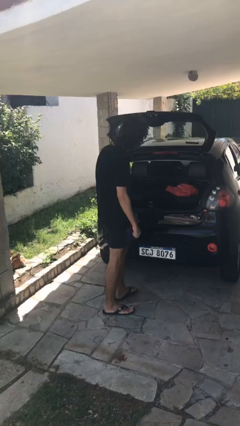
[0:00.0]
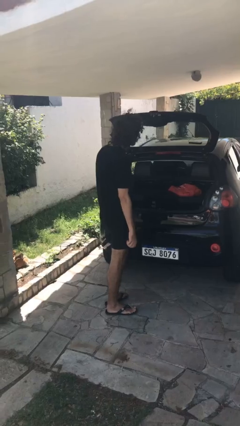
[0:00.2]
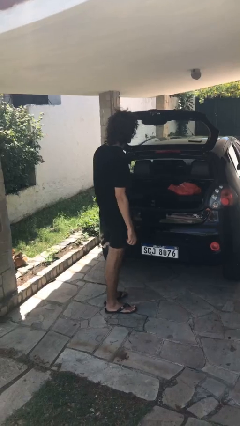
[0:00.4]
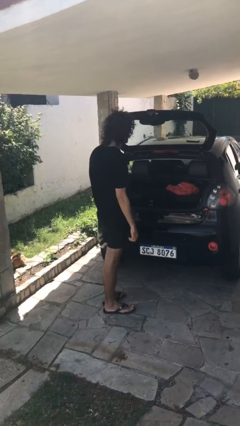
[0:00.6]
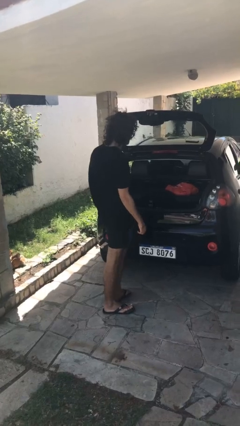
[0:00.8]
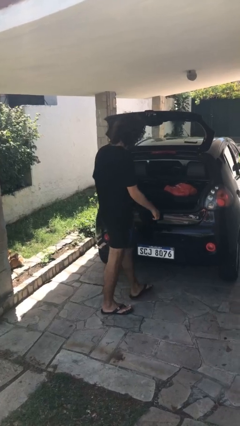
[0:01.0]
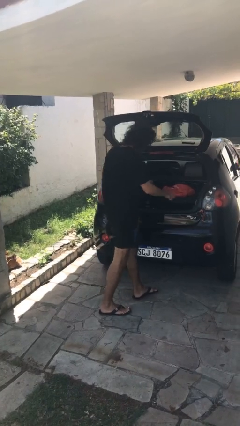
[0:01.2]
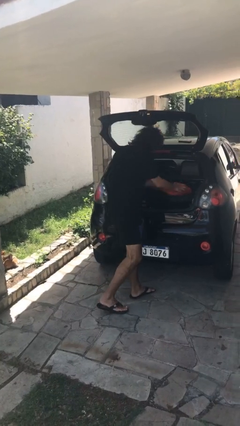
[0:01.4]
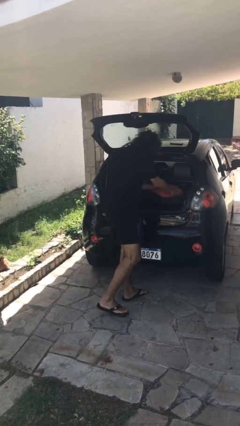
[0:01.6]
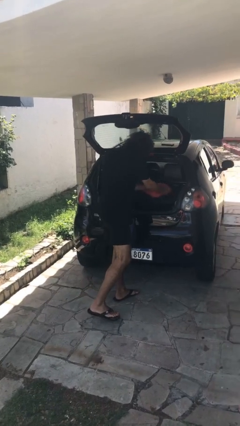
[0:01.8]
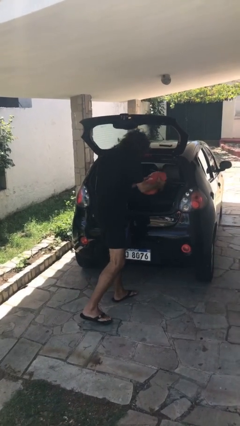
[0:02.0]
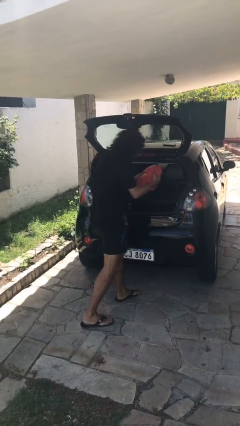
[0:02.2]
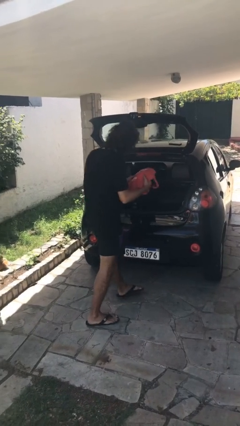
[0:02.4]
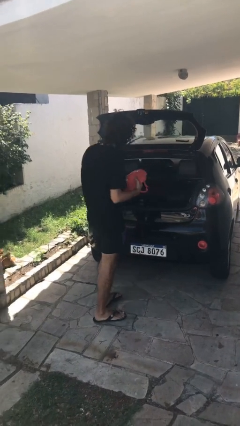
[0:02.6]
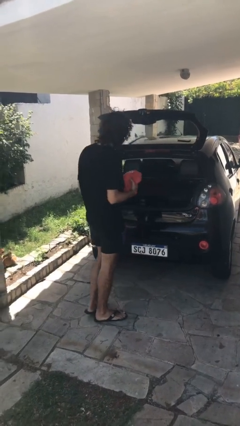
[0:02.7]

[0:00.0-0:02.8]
person unloads car

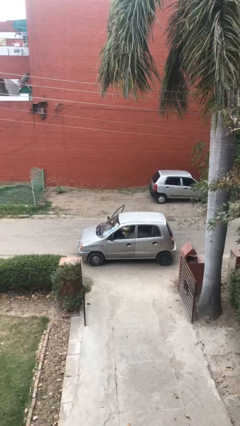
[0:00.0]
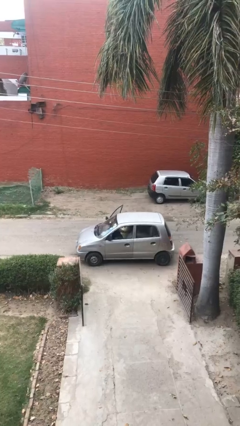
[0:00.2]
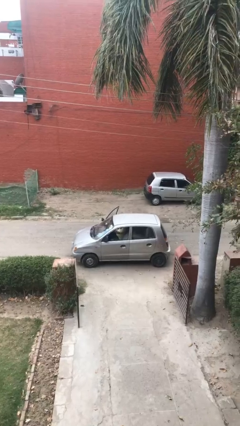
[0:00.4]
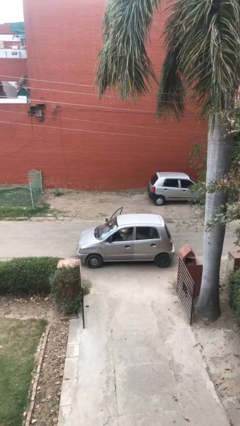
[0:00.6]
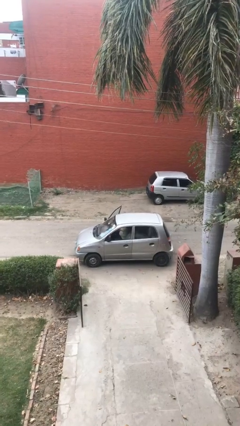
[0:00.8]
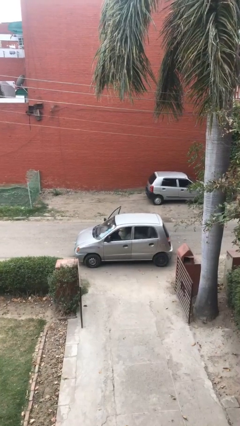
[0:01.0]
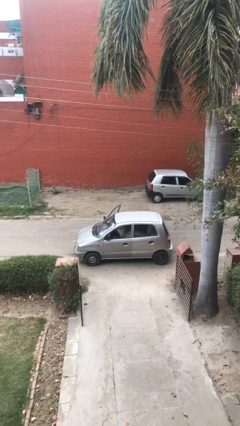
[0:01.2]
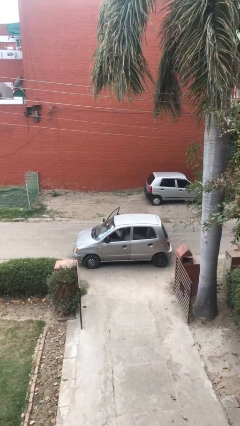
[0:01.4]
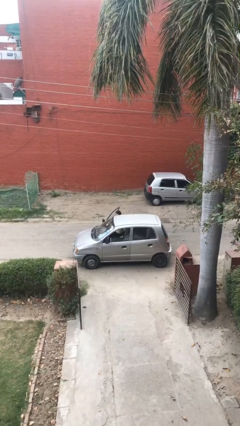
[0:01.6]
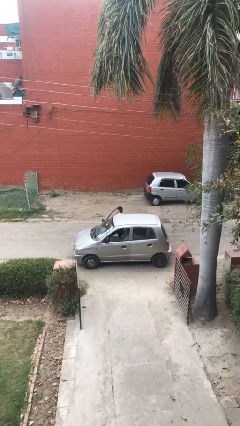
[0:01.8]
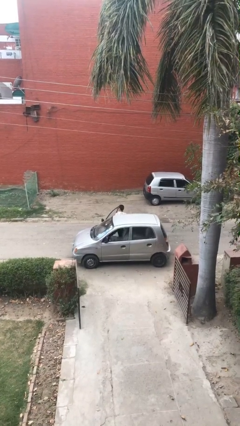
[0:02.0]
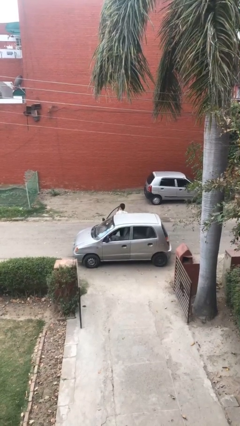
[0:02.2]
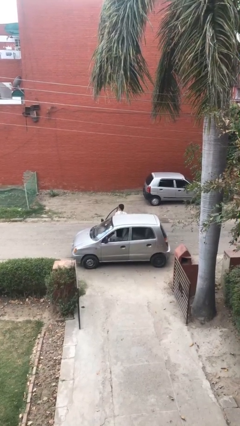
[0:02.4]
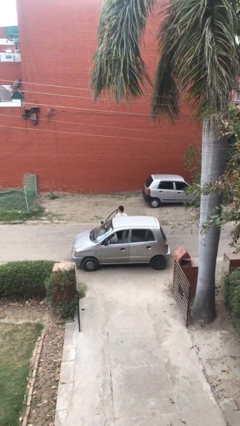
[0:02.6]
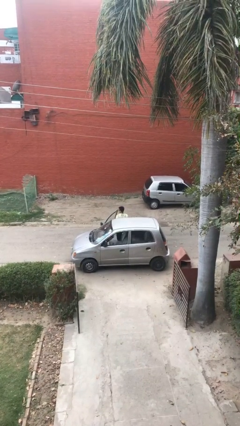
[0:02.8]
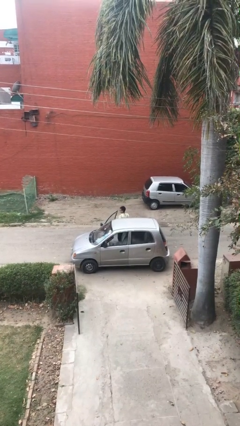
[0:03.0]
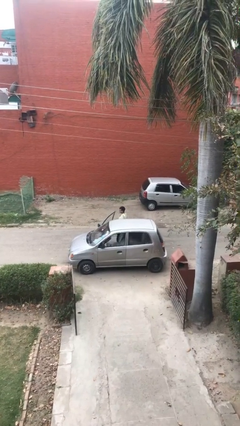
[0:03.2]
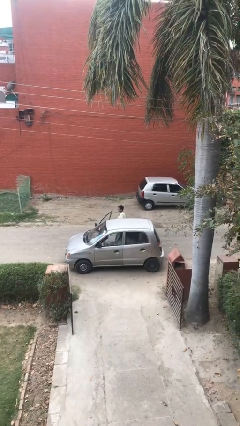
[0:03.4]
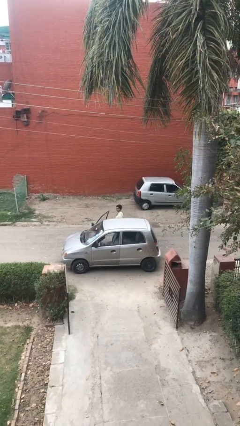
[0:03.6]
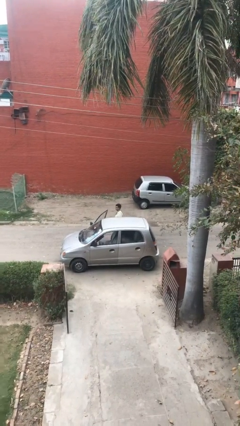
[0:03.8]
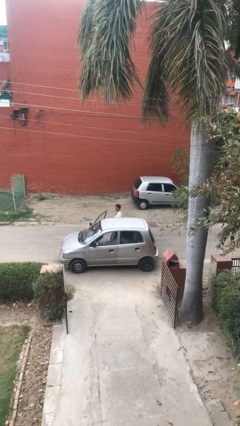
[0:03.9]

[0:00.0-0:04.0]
person exits car

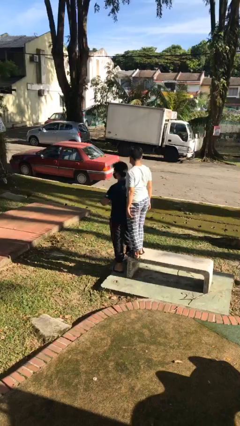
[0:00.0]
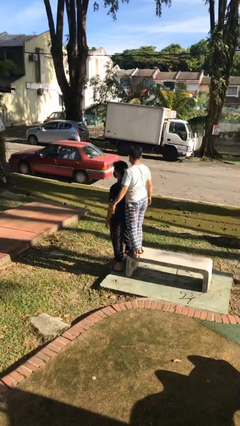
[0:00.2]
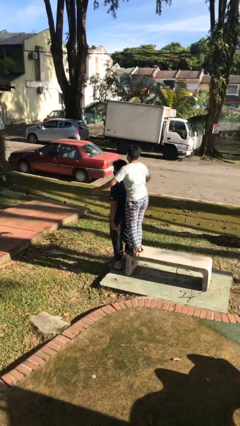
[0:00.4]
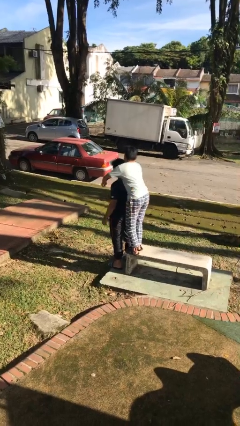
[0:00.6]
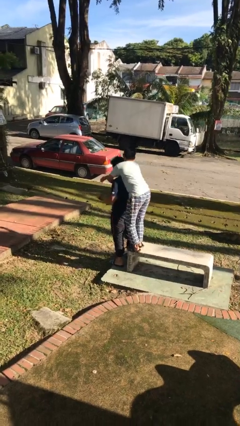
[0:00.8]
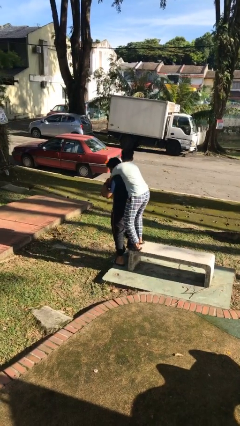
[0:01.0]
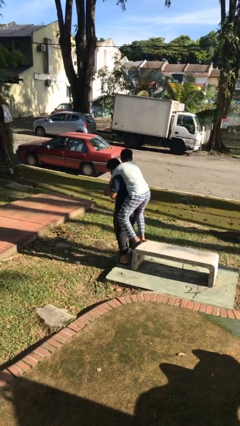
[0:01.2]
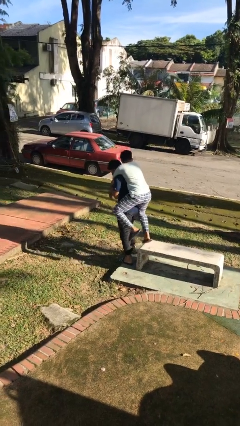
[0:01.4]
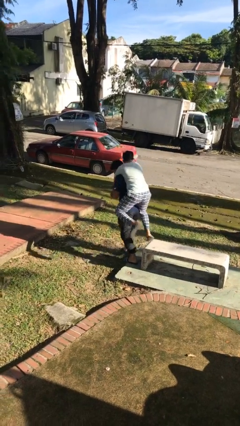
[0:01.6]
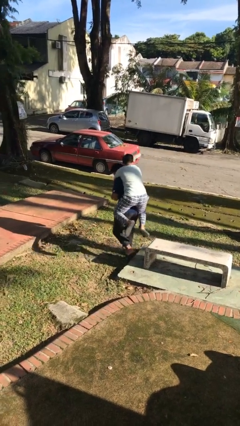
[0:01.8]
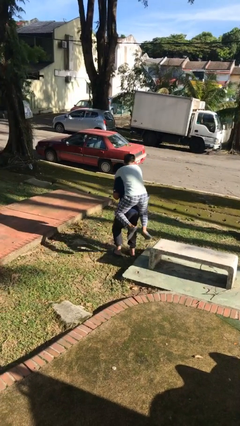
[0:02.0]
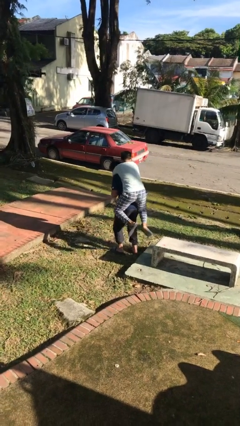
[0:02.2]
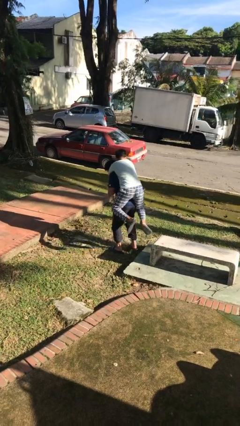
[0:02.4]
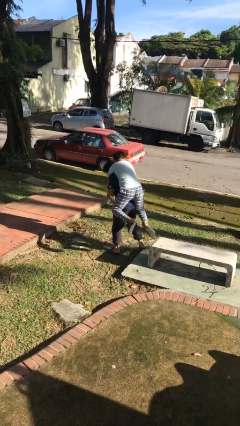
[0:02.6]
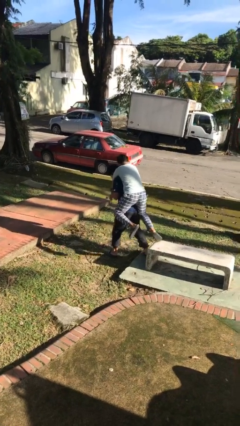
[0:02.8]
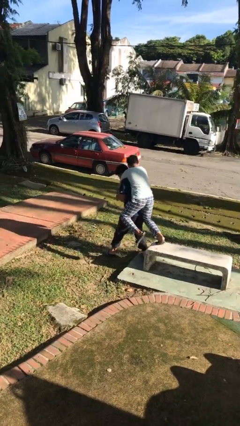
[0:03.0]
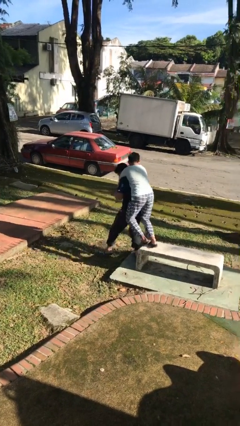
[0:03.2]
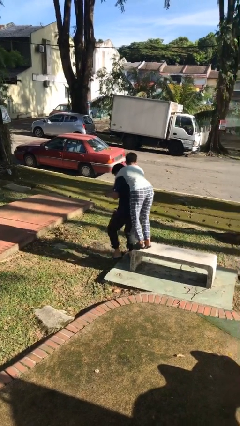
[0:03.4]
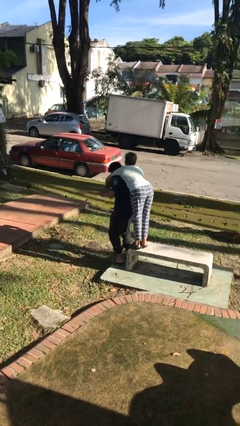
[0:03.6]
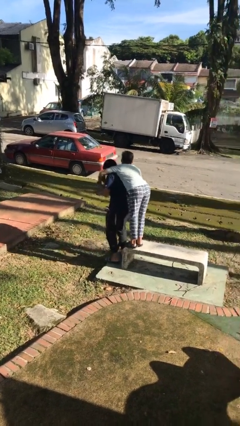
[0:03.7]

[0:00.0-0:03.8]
person carries person on back

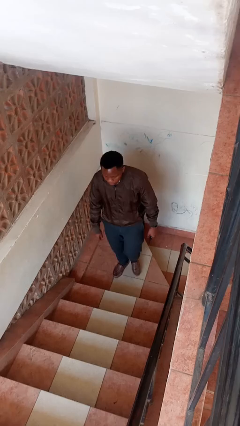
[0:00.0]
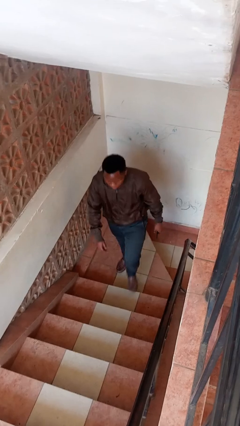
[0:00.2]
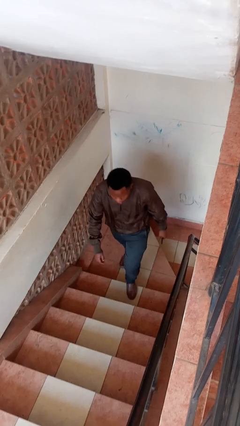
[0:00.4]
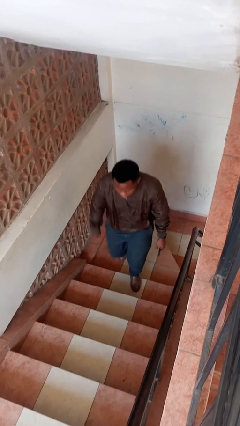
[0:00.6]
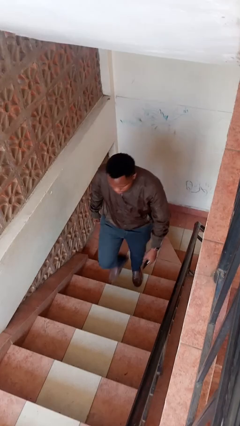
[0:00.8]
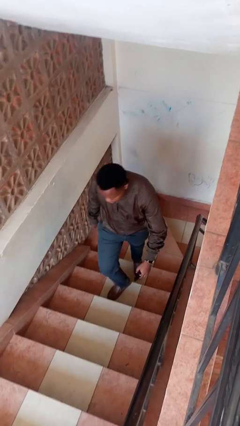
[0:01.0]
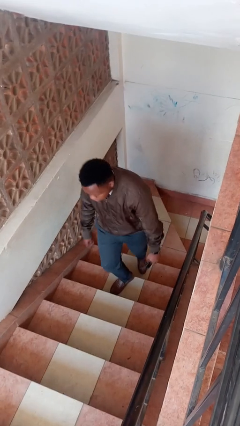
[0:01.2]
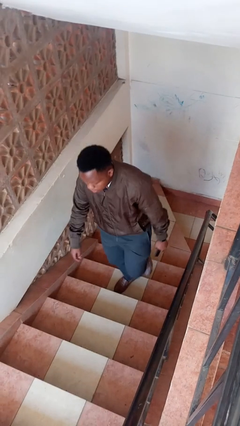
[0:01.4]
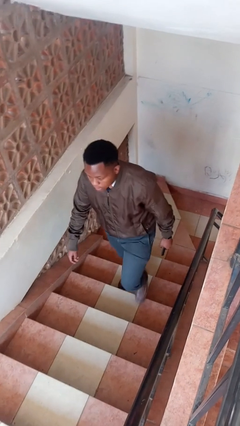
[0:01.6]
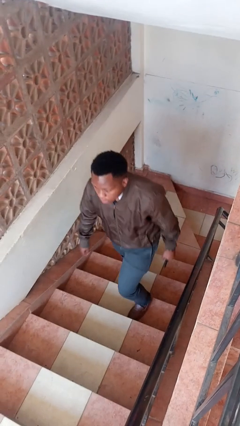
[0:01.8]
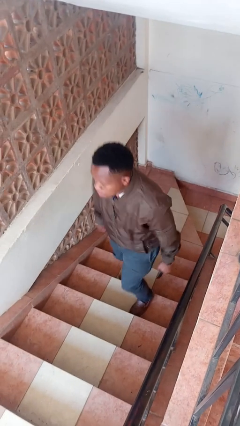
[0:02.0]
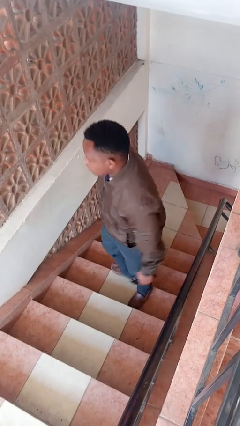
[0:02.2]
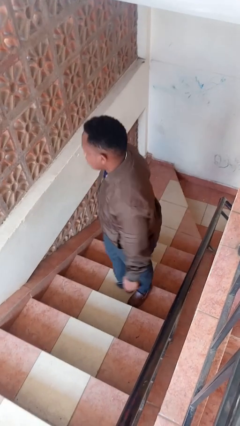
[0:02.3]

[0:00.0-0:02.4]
person climbs up stairs

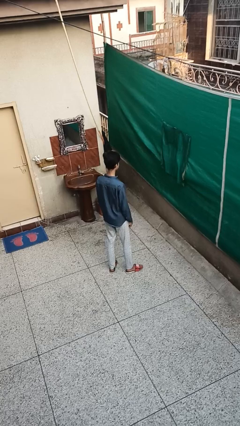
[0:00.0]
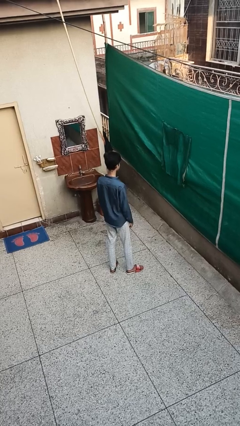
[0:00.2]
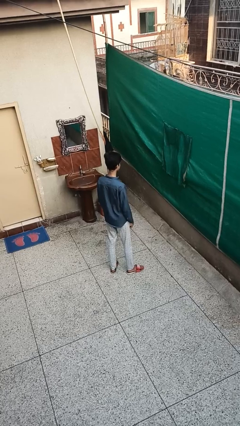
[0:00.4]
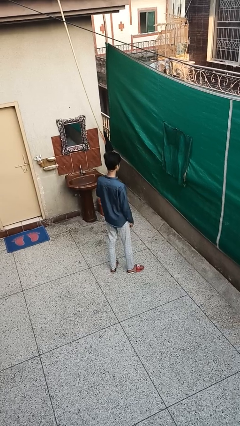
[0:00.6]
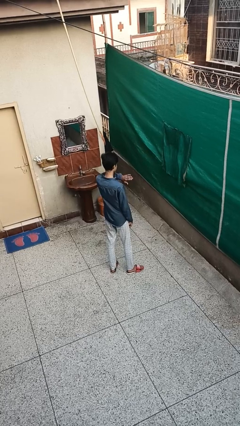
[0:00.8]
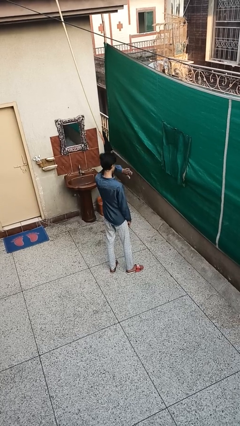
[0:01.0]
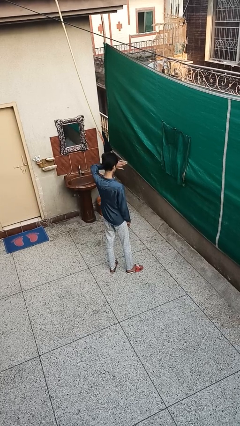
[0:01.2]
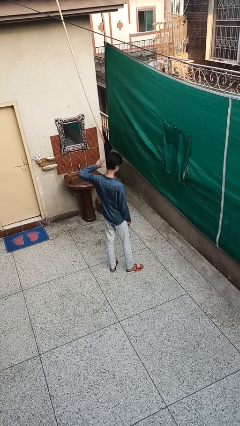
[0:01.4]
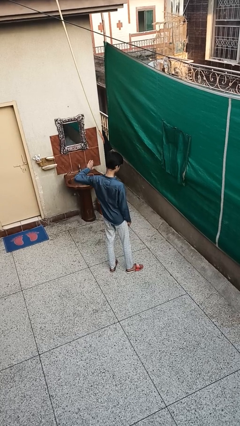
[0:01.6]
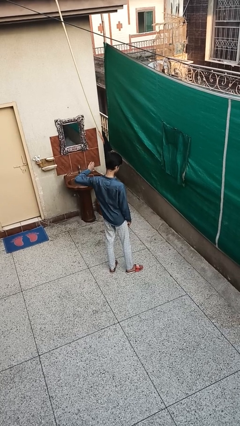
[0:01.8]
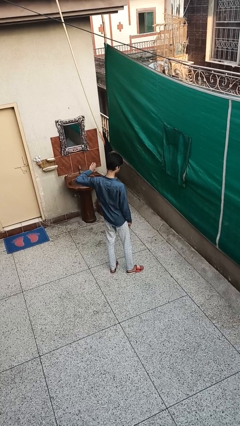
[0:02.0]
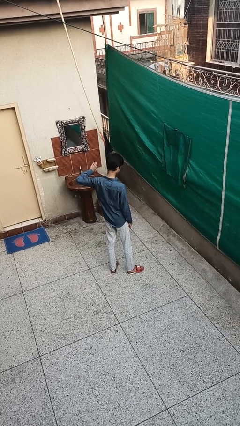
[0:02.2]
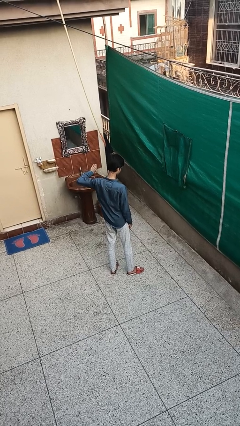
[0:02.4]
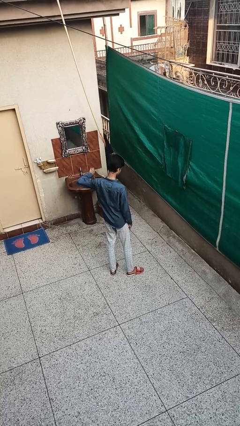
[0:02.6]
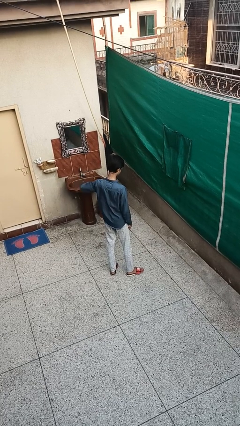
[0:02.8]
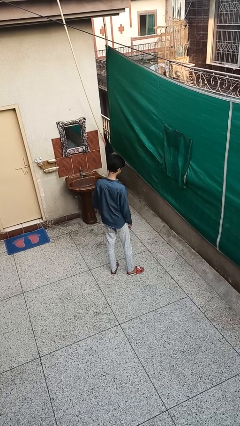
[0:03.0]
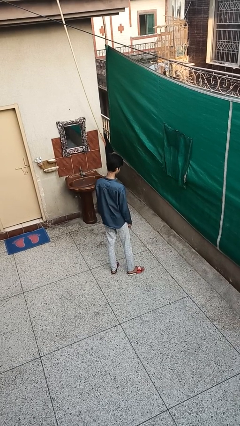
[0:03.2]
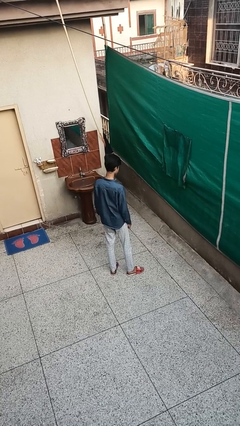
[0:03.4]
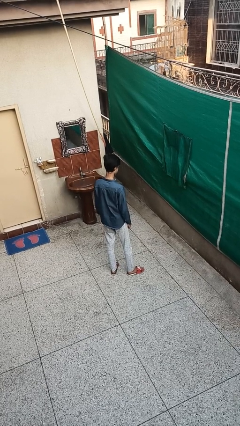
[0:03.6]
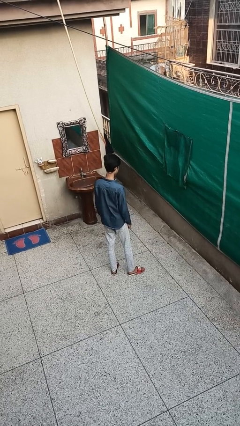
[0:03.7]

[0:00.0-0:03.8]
person gestures swipe left

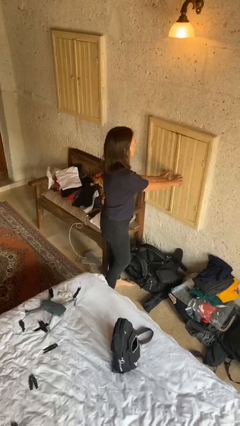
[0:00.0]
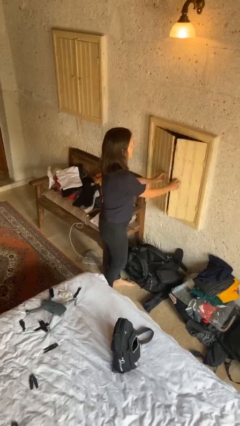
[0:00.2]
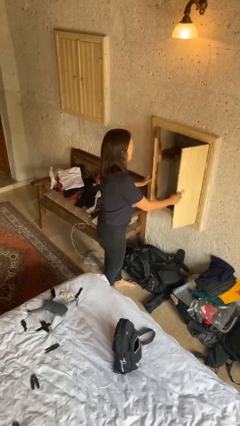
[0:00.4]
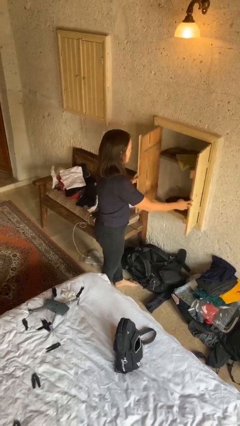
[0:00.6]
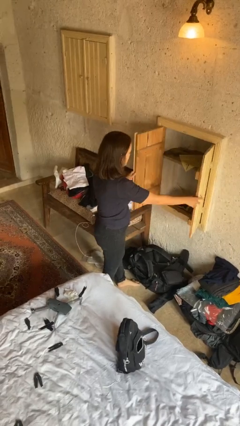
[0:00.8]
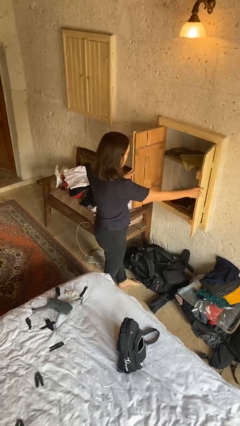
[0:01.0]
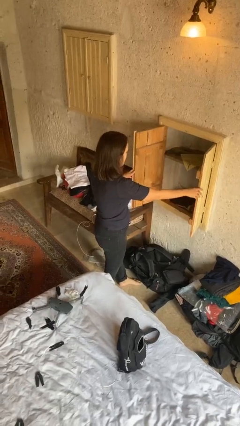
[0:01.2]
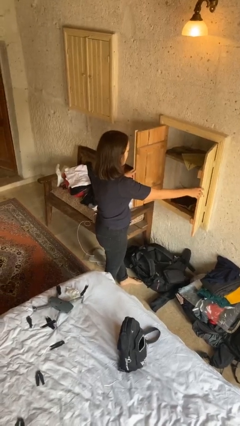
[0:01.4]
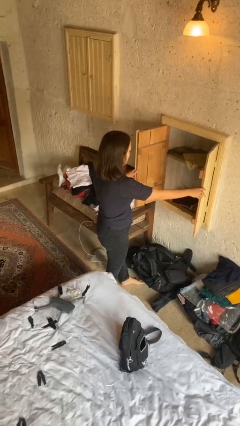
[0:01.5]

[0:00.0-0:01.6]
person opens closet door
